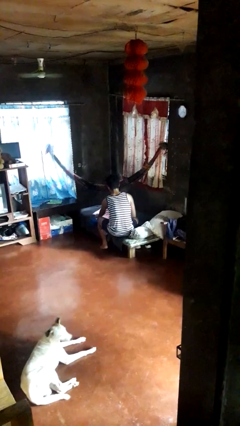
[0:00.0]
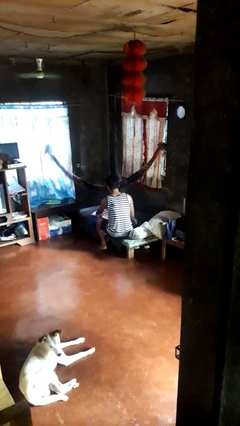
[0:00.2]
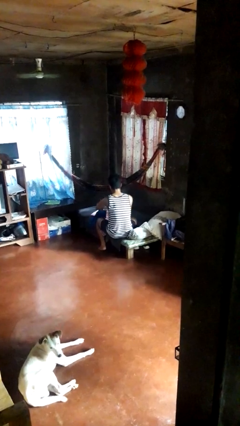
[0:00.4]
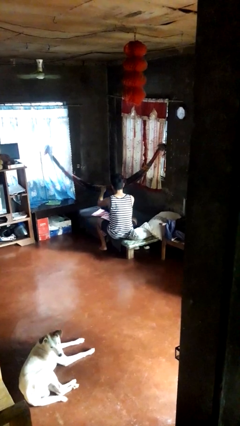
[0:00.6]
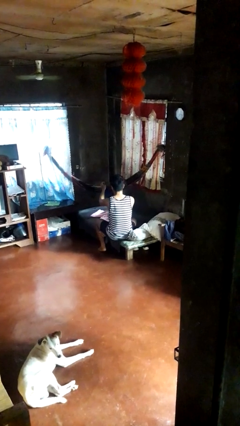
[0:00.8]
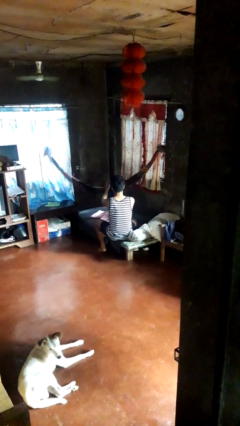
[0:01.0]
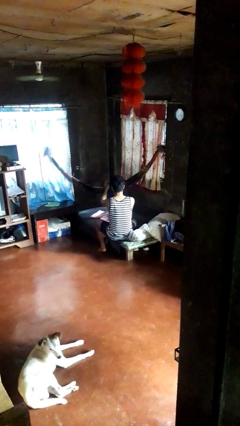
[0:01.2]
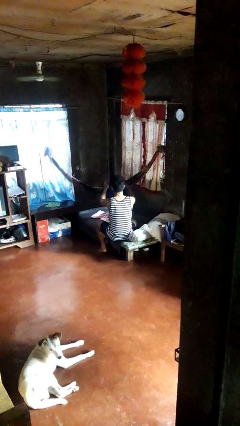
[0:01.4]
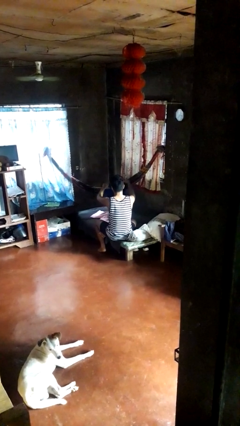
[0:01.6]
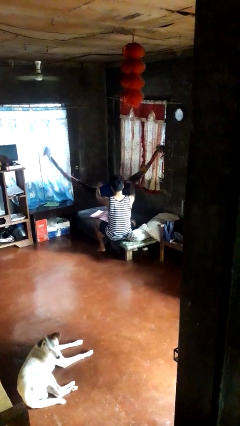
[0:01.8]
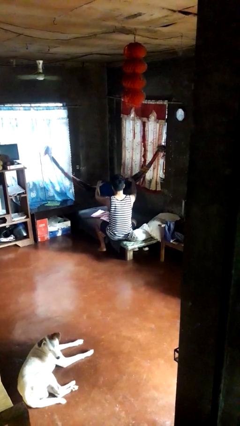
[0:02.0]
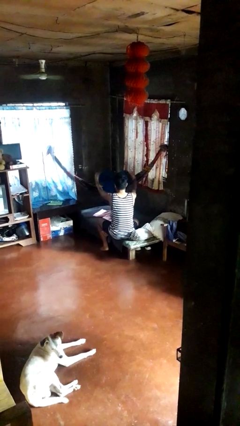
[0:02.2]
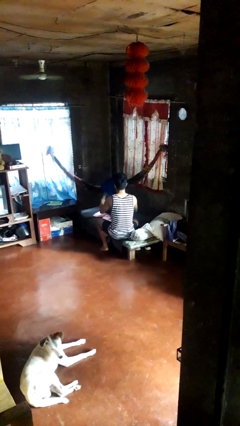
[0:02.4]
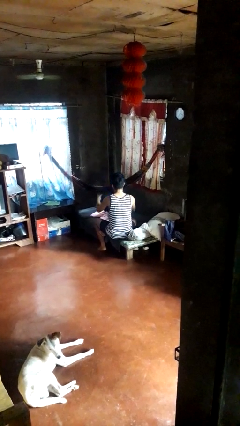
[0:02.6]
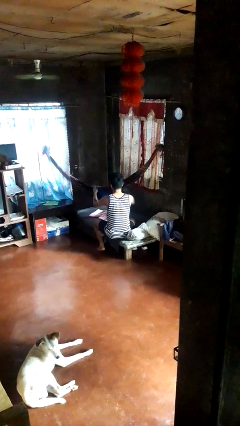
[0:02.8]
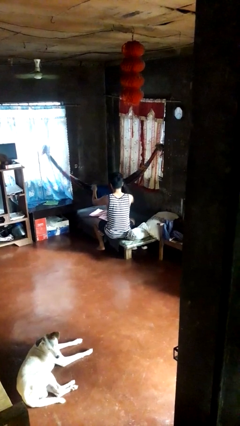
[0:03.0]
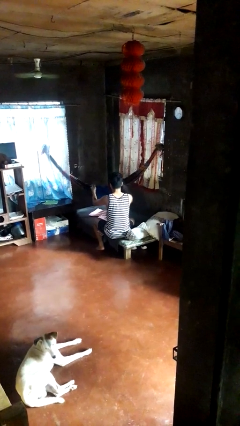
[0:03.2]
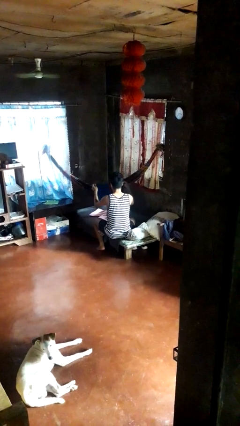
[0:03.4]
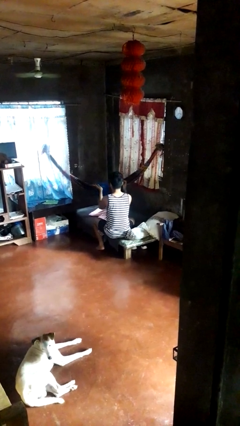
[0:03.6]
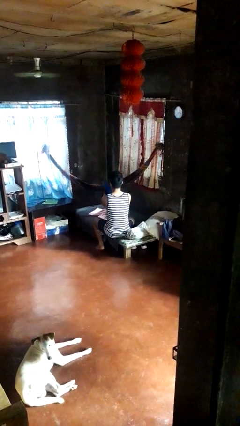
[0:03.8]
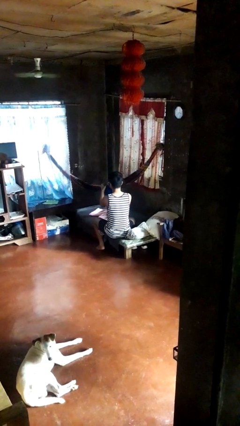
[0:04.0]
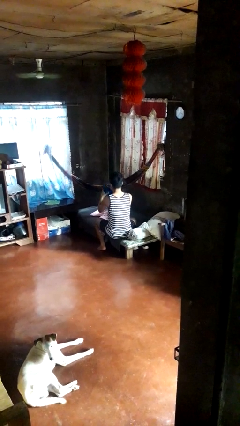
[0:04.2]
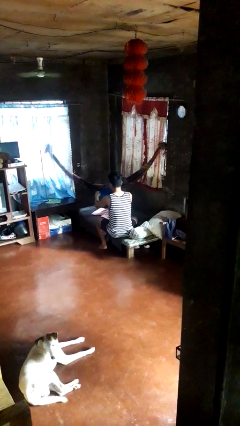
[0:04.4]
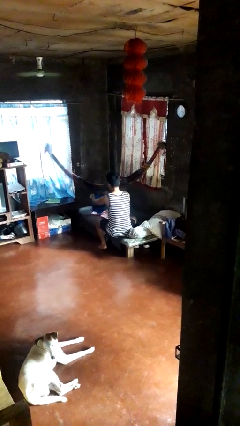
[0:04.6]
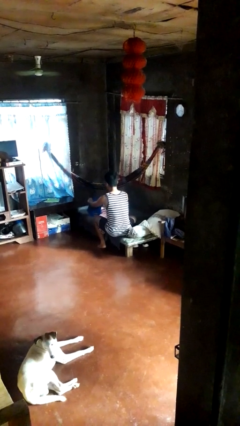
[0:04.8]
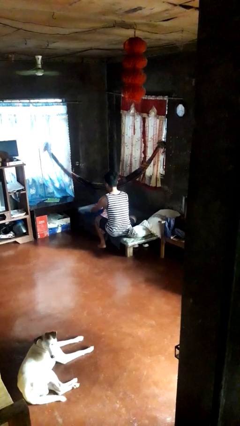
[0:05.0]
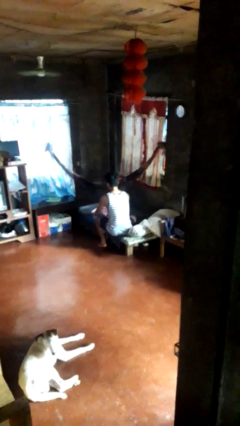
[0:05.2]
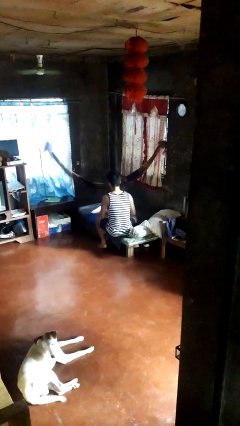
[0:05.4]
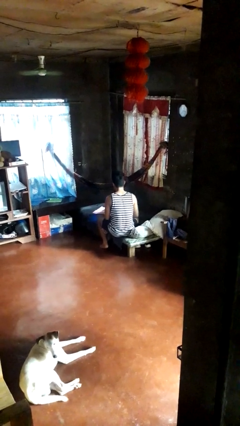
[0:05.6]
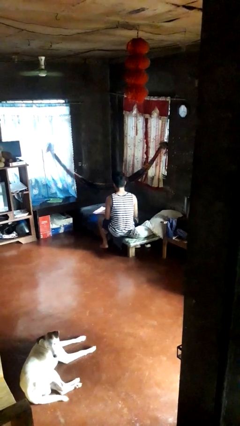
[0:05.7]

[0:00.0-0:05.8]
person folds shirt

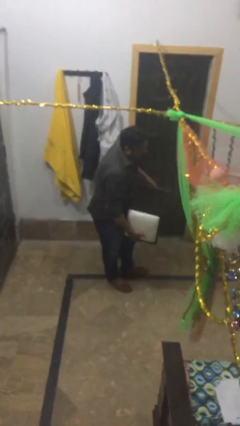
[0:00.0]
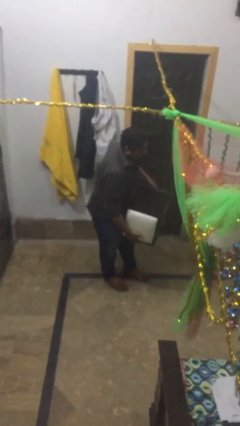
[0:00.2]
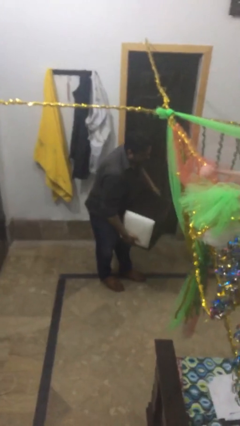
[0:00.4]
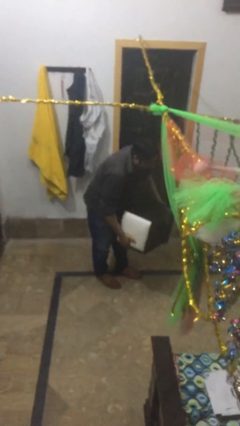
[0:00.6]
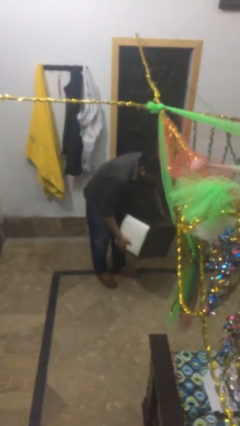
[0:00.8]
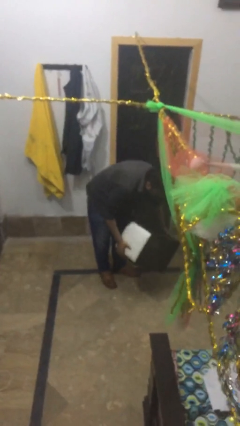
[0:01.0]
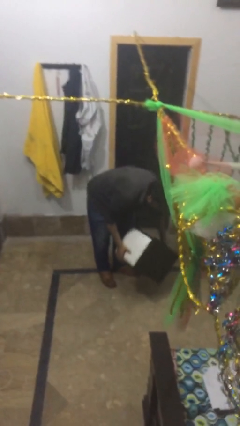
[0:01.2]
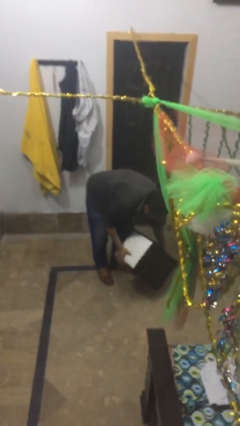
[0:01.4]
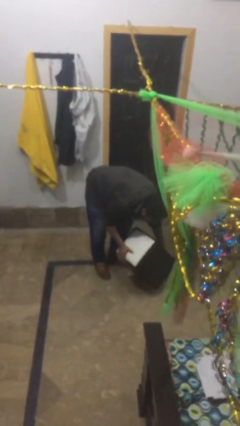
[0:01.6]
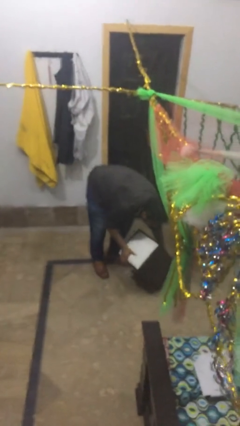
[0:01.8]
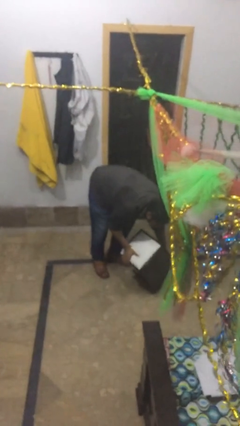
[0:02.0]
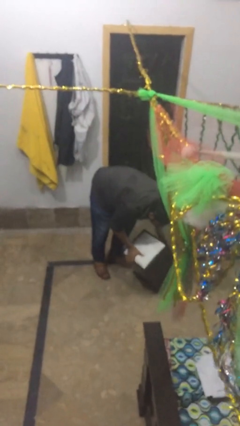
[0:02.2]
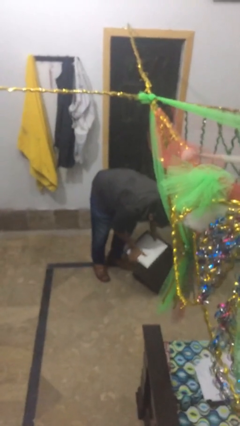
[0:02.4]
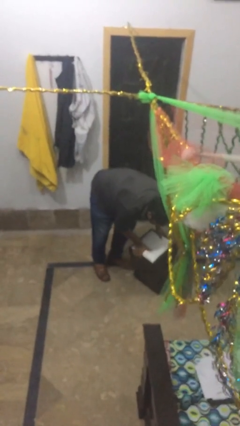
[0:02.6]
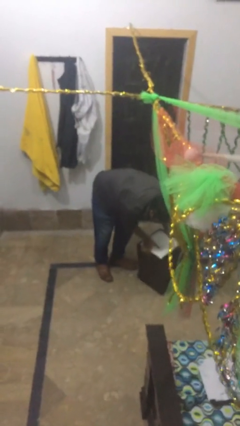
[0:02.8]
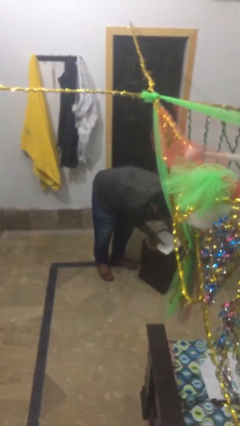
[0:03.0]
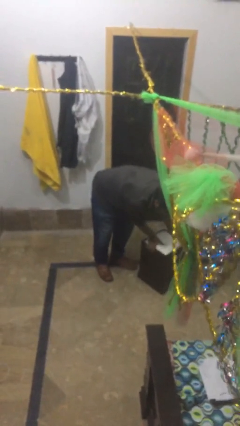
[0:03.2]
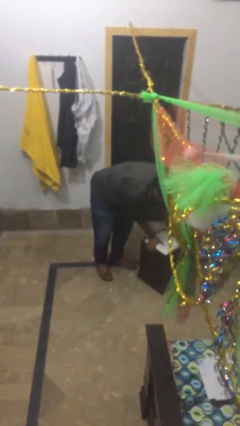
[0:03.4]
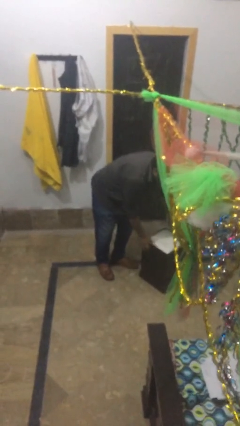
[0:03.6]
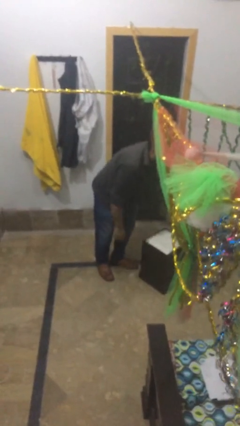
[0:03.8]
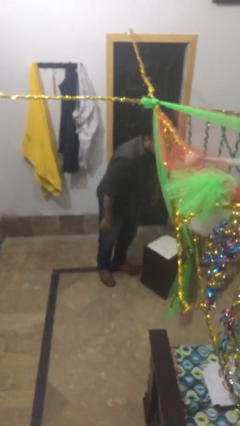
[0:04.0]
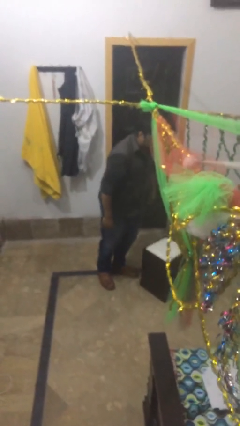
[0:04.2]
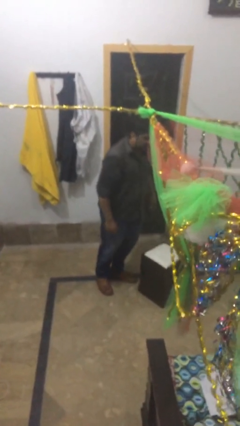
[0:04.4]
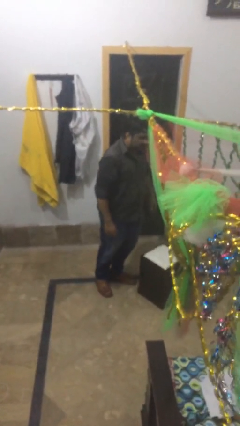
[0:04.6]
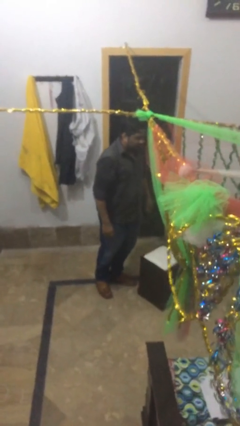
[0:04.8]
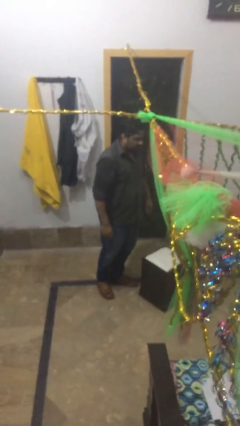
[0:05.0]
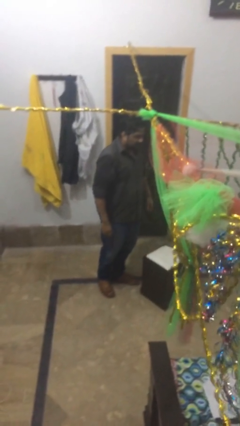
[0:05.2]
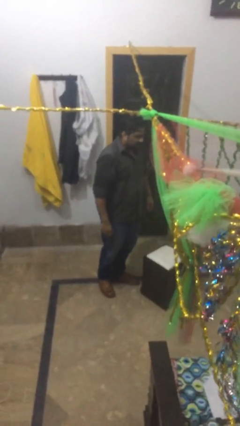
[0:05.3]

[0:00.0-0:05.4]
person puts down object on floor

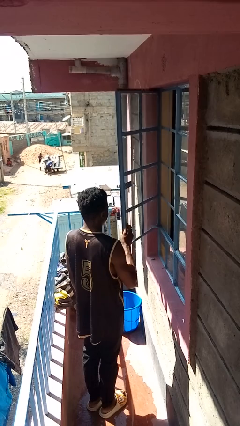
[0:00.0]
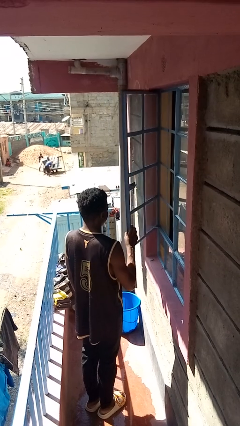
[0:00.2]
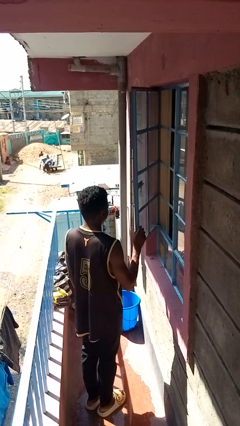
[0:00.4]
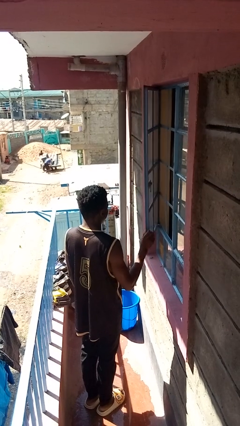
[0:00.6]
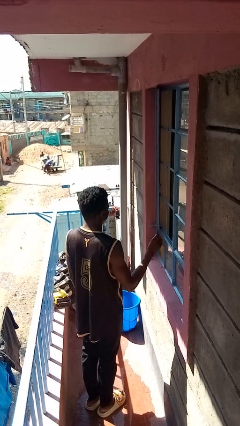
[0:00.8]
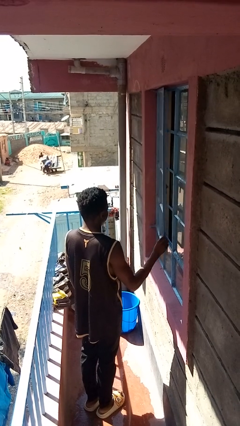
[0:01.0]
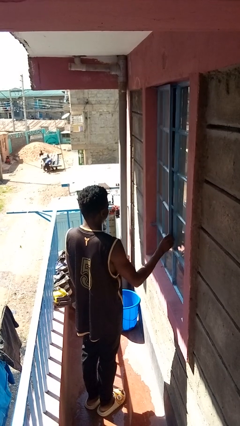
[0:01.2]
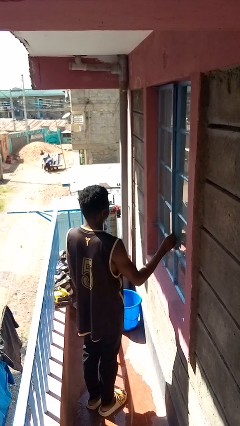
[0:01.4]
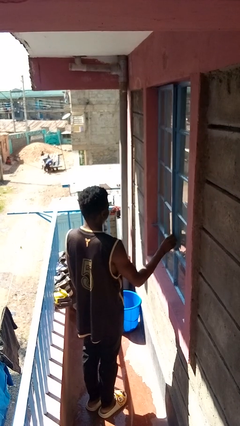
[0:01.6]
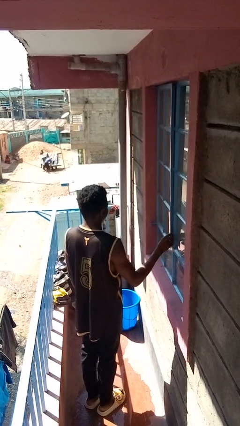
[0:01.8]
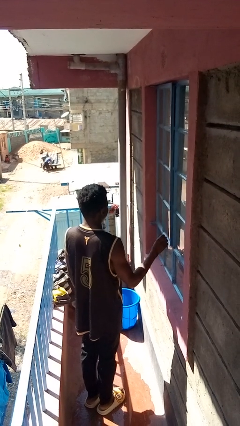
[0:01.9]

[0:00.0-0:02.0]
person closes home window

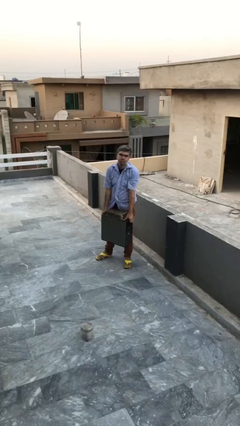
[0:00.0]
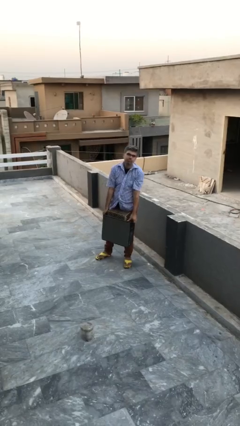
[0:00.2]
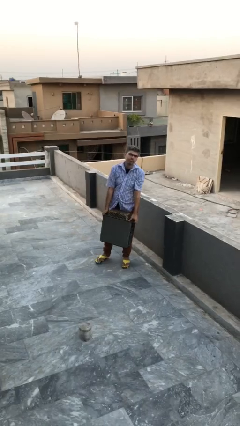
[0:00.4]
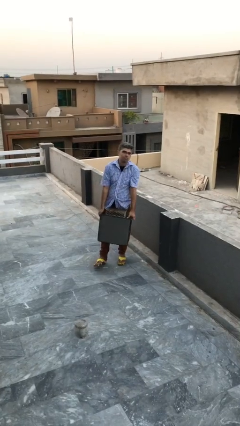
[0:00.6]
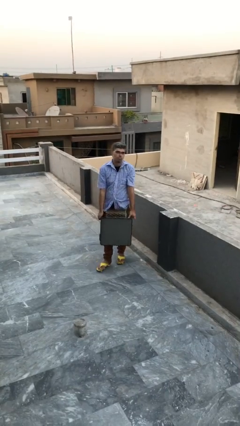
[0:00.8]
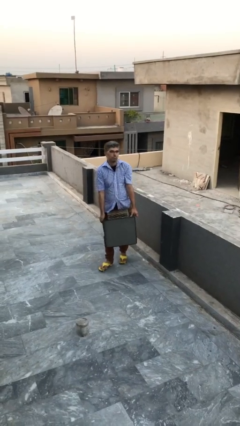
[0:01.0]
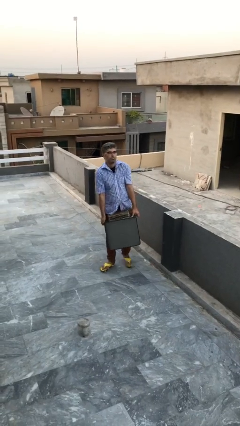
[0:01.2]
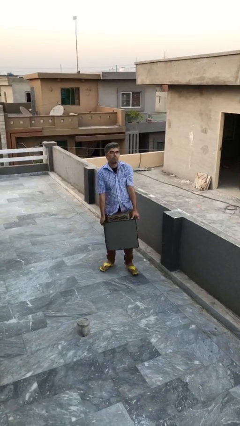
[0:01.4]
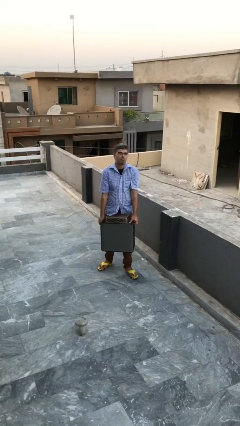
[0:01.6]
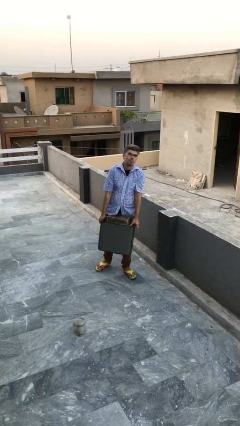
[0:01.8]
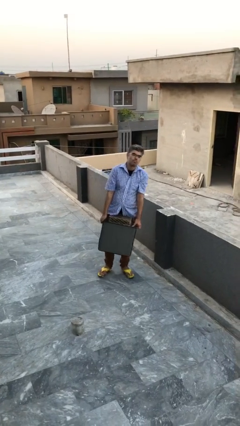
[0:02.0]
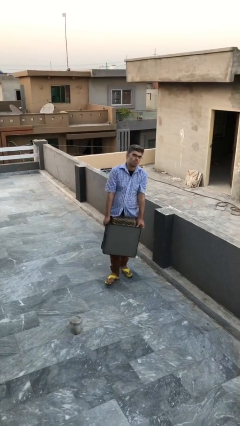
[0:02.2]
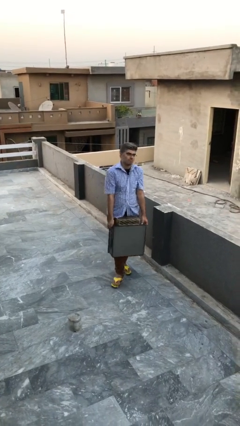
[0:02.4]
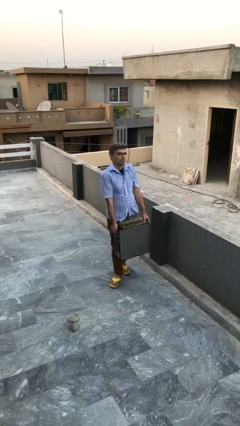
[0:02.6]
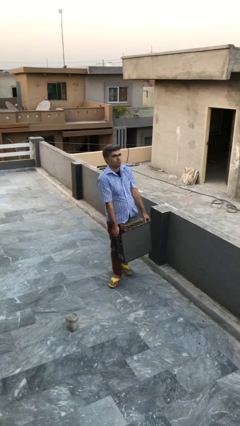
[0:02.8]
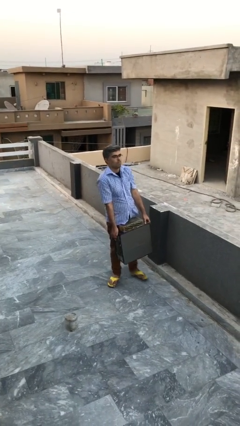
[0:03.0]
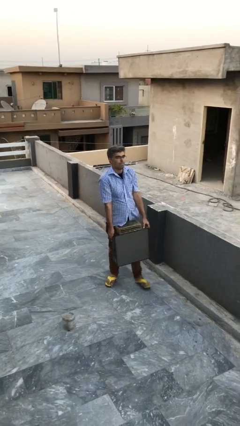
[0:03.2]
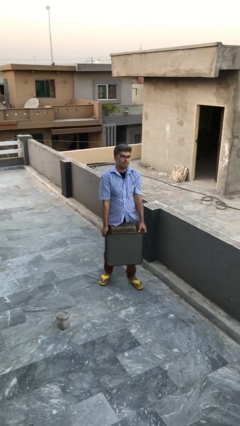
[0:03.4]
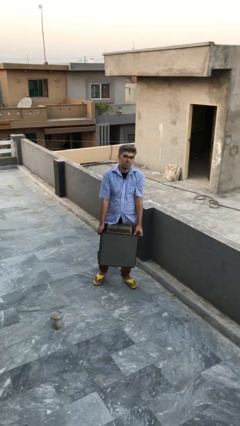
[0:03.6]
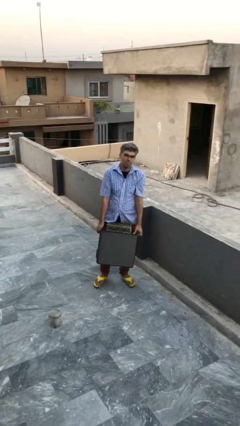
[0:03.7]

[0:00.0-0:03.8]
person carries heavy object

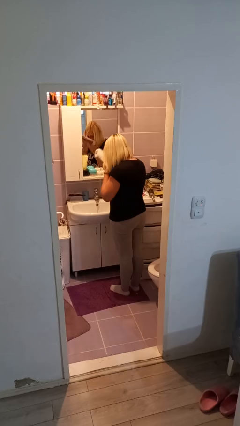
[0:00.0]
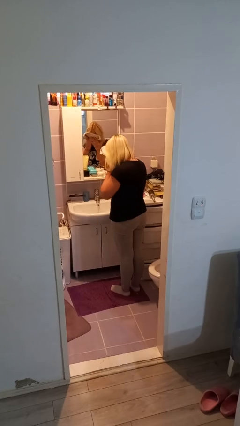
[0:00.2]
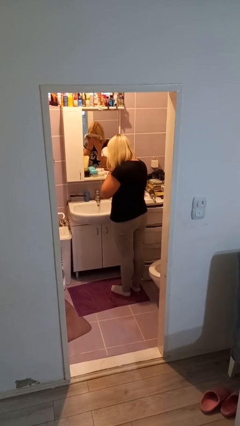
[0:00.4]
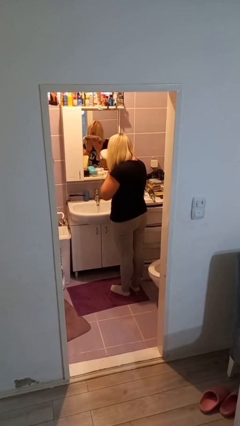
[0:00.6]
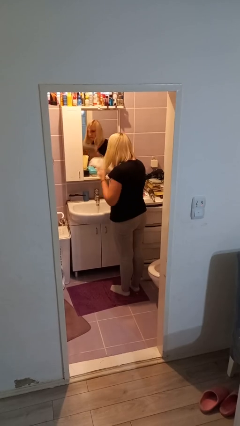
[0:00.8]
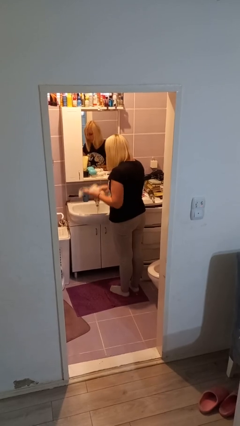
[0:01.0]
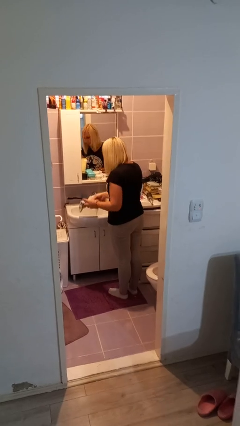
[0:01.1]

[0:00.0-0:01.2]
person dries face with towel
